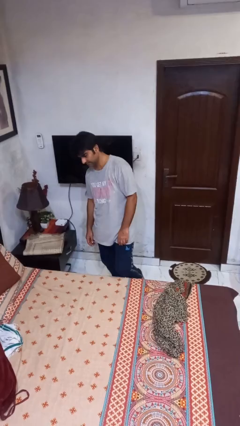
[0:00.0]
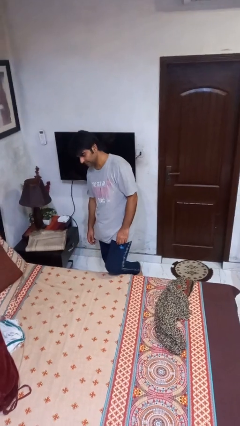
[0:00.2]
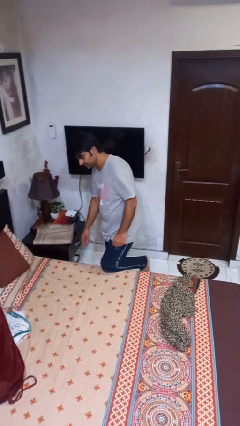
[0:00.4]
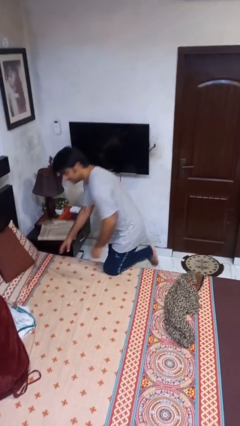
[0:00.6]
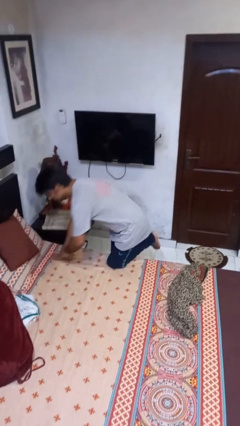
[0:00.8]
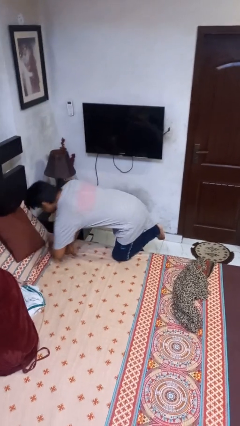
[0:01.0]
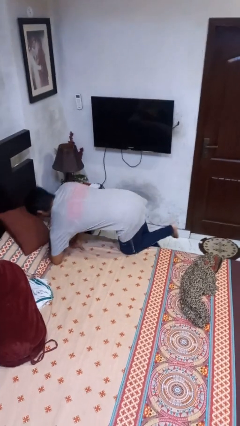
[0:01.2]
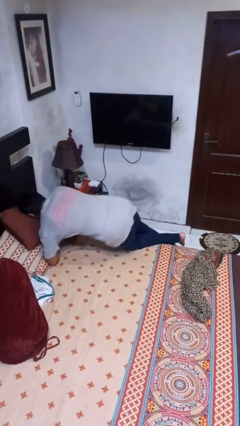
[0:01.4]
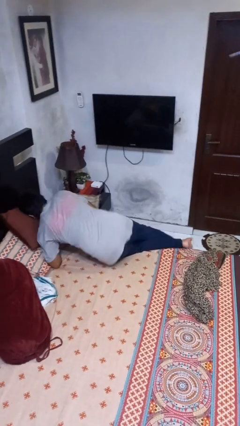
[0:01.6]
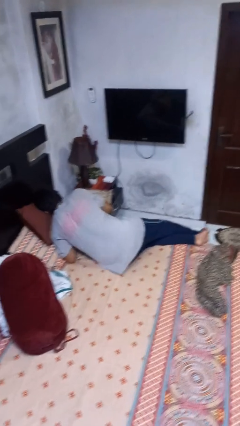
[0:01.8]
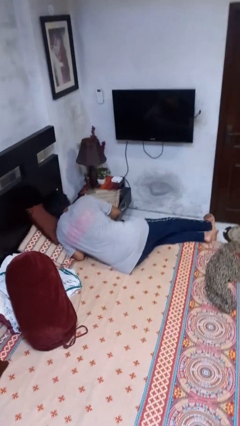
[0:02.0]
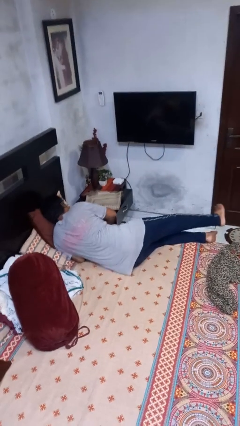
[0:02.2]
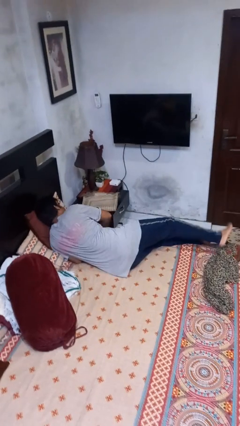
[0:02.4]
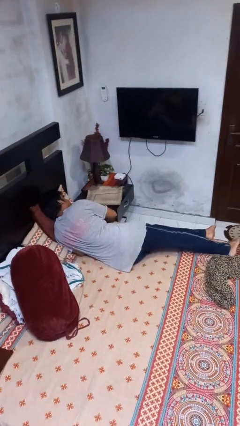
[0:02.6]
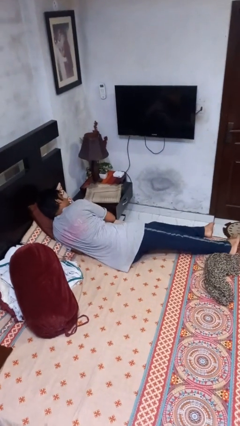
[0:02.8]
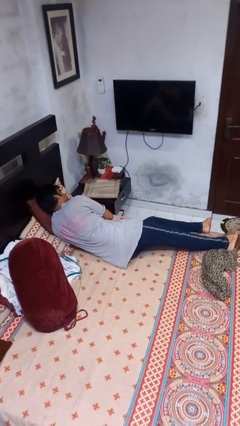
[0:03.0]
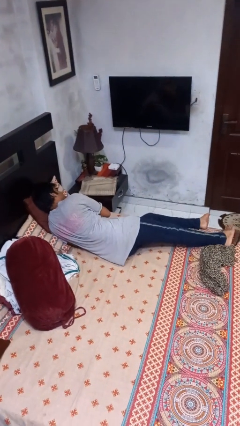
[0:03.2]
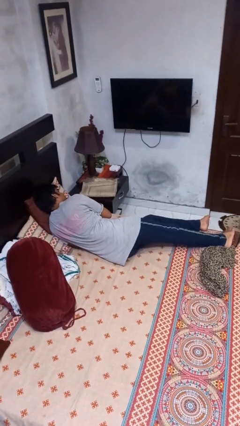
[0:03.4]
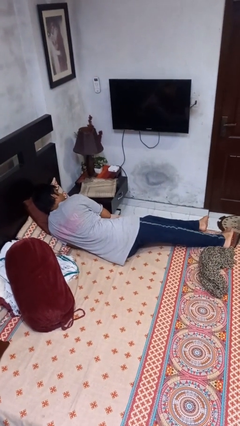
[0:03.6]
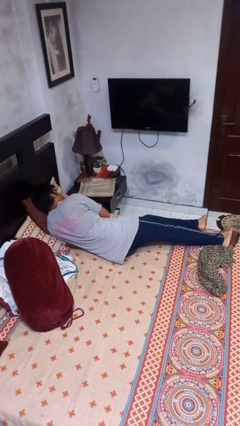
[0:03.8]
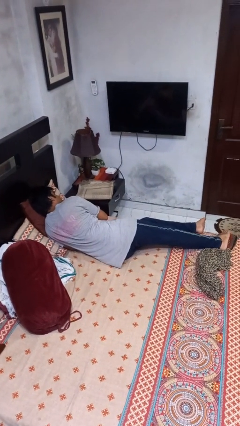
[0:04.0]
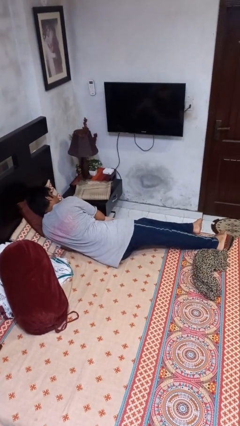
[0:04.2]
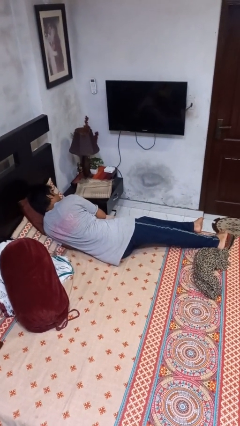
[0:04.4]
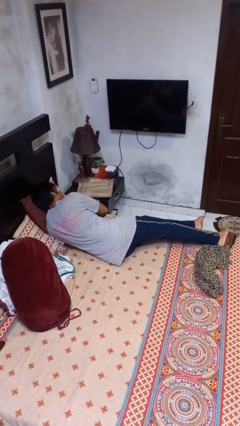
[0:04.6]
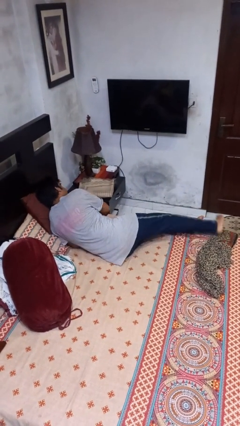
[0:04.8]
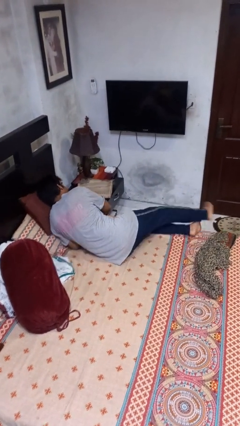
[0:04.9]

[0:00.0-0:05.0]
person lies down on bed

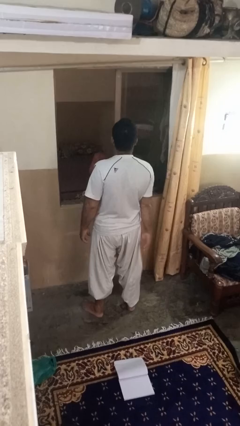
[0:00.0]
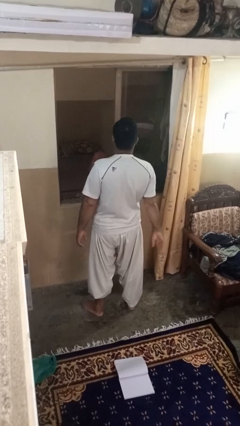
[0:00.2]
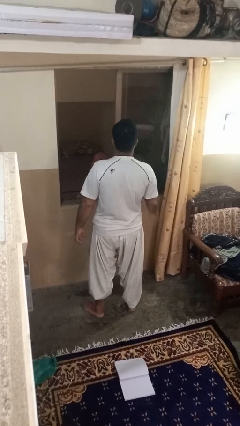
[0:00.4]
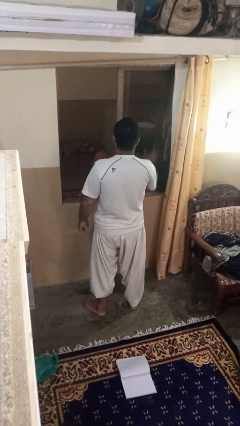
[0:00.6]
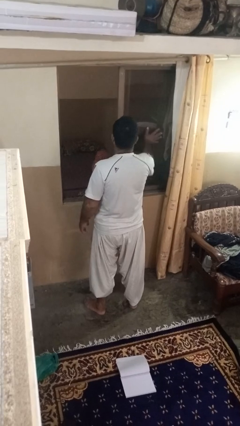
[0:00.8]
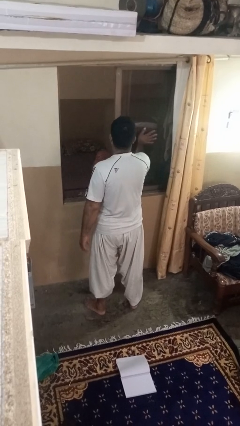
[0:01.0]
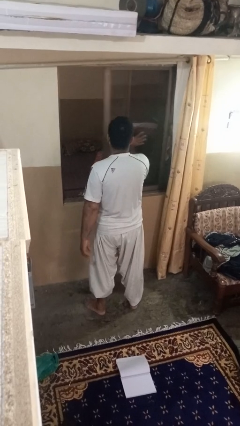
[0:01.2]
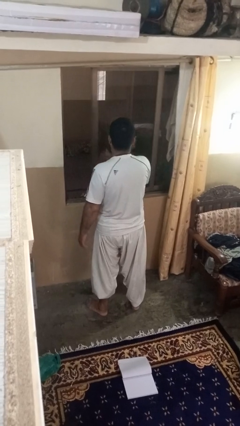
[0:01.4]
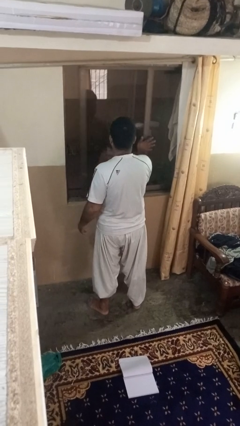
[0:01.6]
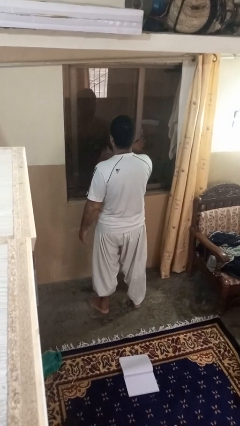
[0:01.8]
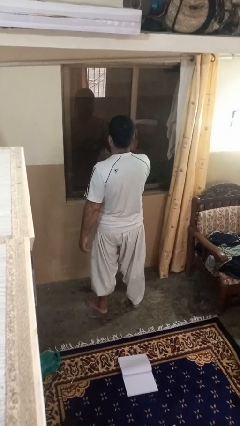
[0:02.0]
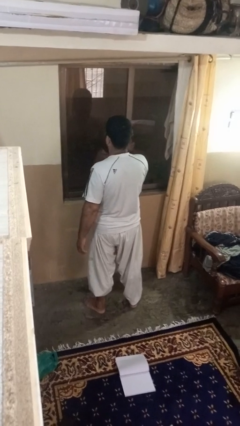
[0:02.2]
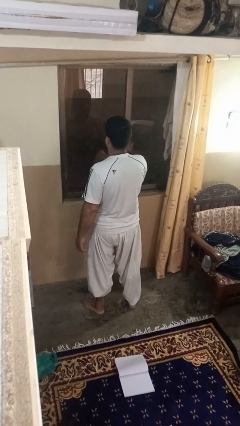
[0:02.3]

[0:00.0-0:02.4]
person closes home window

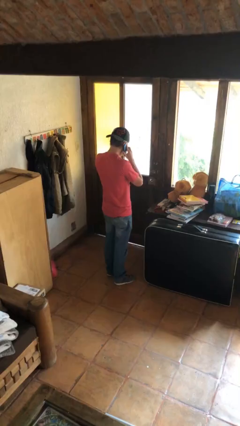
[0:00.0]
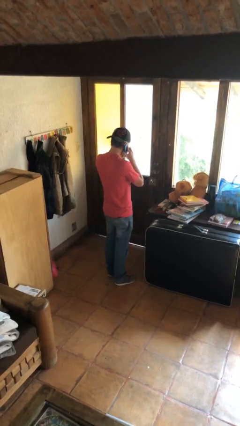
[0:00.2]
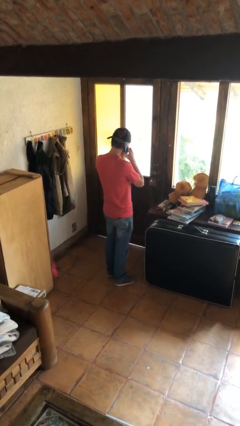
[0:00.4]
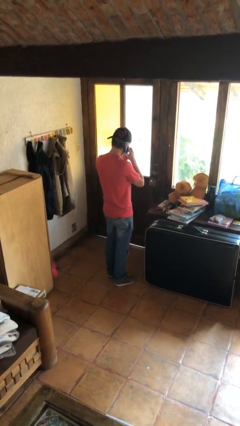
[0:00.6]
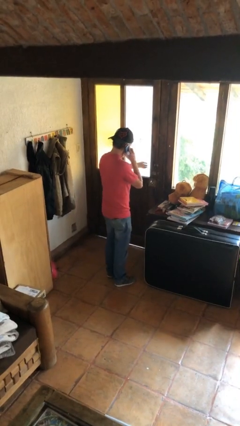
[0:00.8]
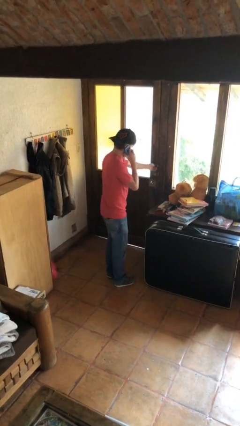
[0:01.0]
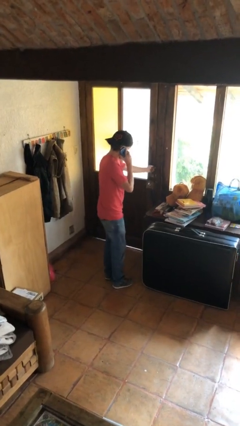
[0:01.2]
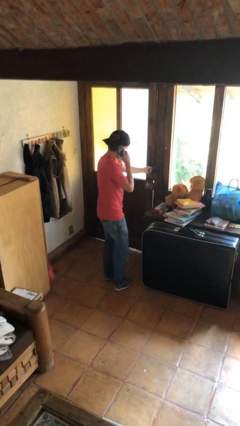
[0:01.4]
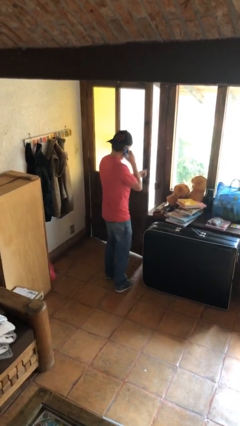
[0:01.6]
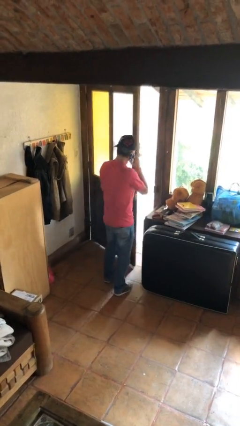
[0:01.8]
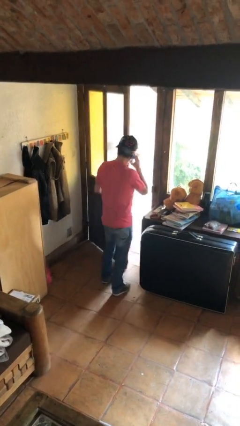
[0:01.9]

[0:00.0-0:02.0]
person opens facility door

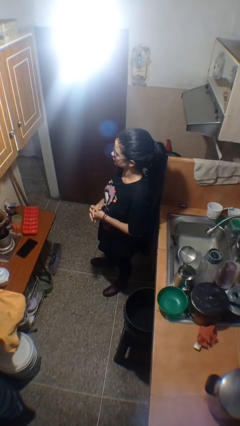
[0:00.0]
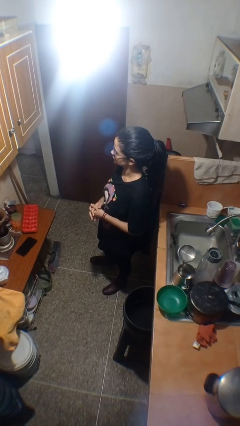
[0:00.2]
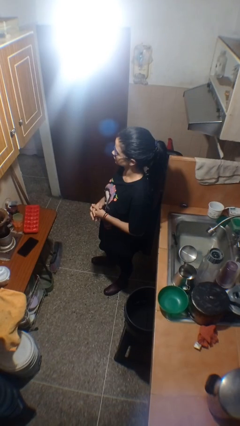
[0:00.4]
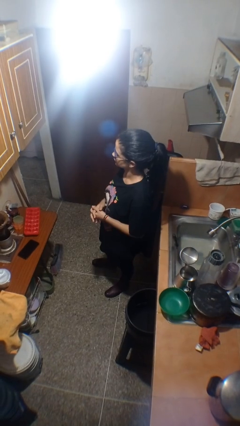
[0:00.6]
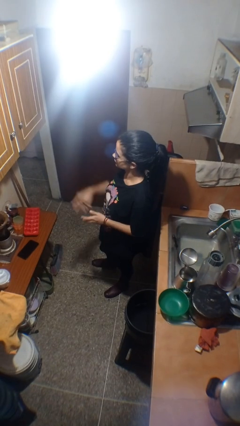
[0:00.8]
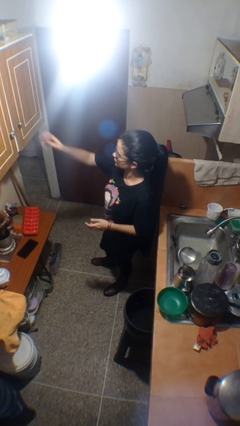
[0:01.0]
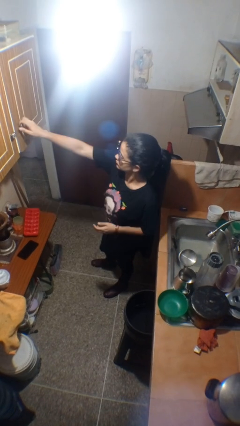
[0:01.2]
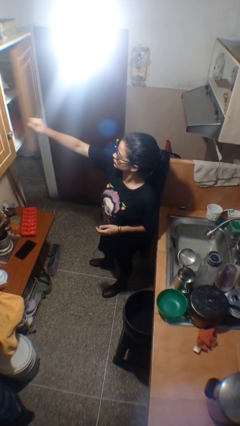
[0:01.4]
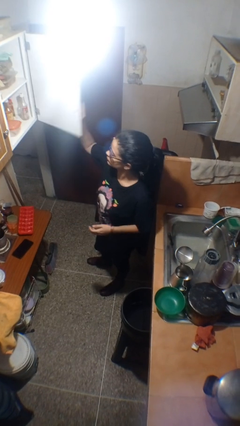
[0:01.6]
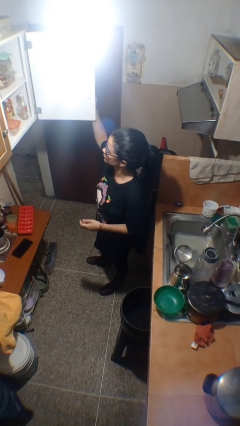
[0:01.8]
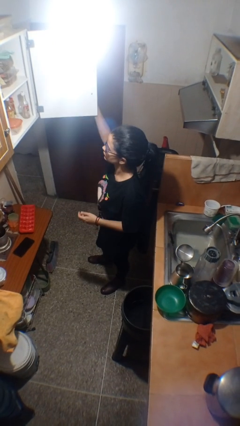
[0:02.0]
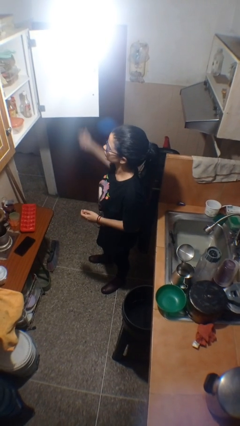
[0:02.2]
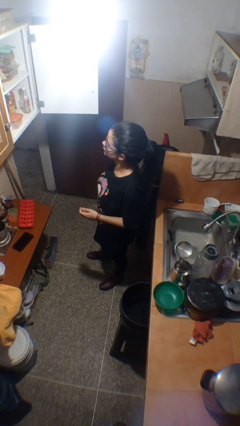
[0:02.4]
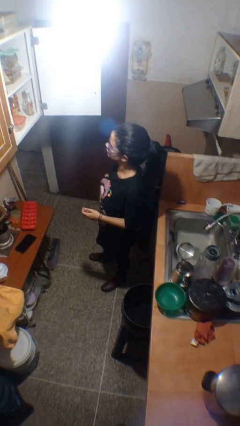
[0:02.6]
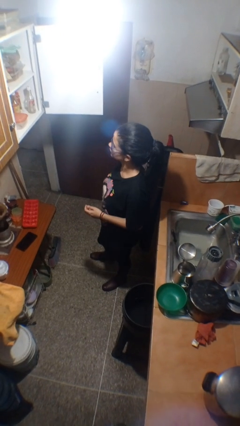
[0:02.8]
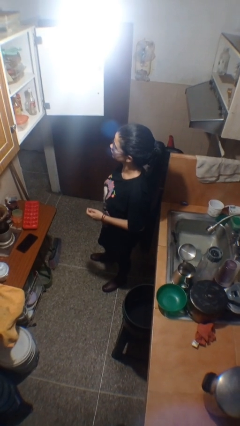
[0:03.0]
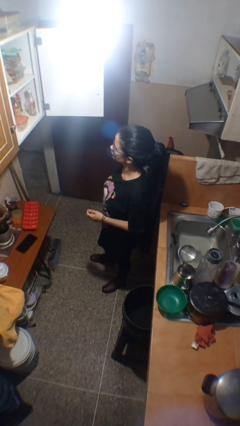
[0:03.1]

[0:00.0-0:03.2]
person opens cabinet

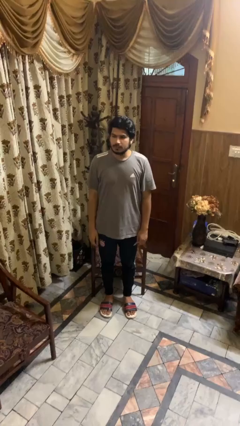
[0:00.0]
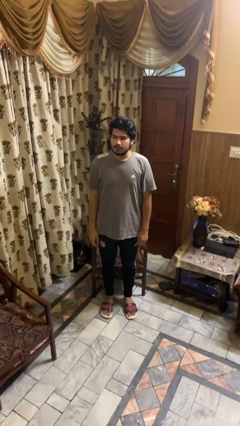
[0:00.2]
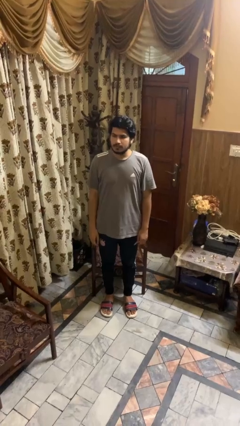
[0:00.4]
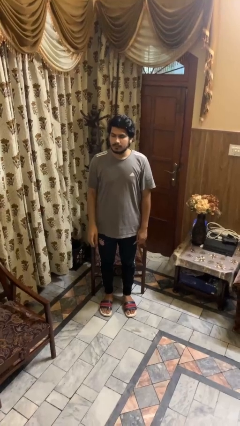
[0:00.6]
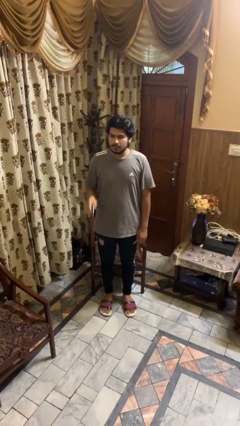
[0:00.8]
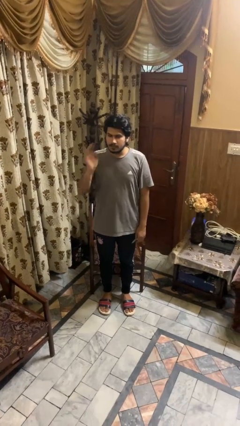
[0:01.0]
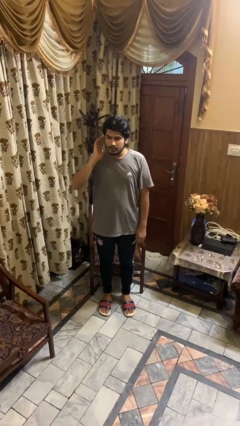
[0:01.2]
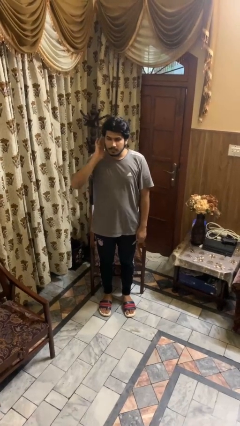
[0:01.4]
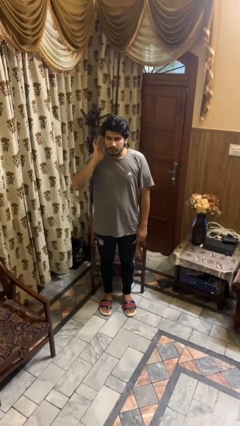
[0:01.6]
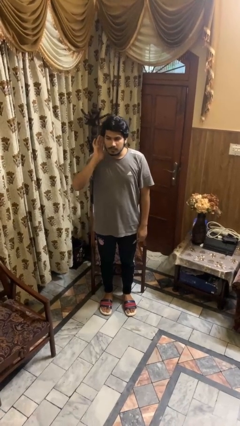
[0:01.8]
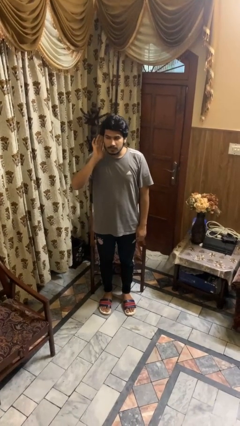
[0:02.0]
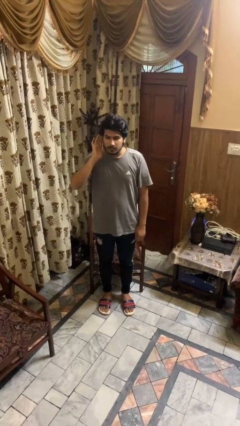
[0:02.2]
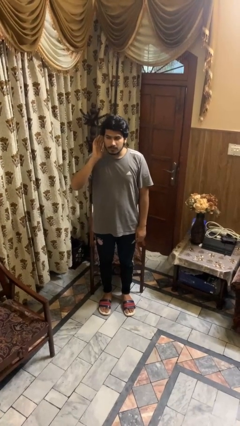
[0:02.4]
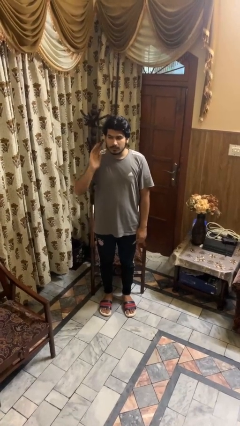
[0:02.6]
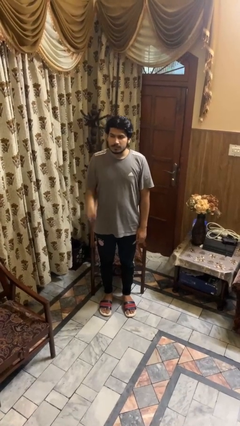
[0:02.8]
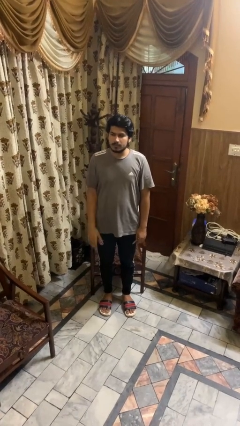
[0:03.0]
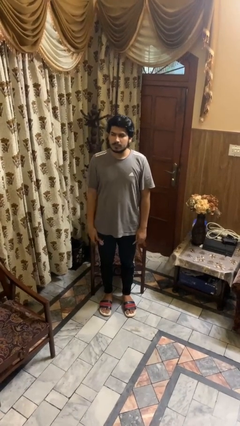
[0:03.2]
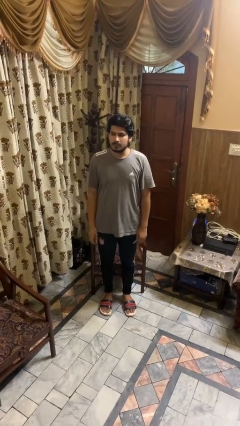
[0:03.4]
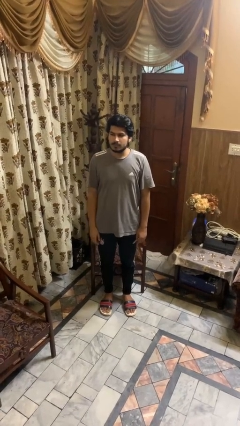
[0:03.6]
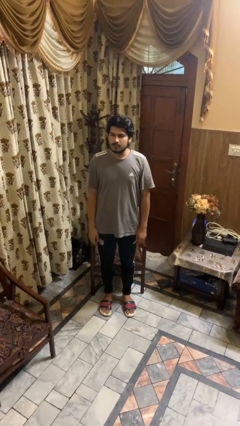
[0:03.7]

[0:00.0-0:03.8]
person gestures listen closely

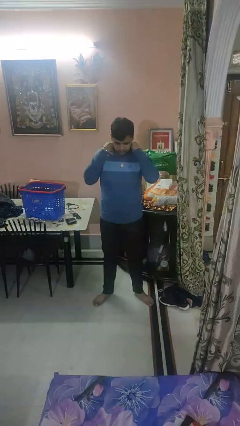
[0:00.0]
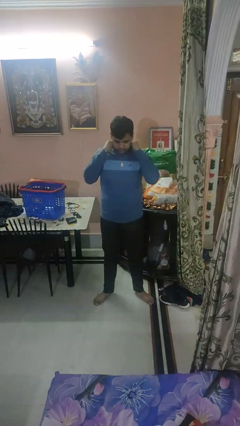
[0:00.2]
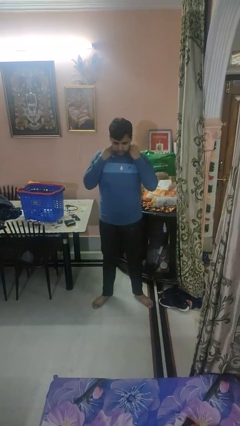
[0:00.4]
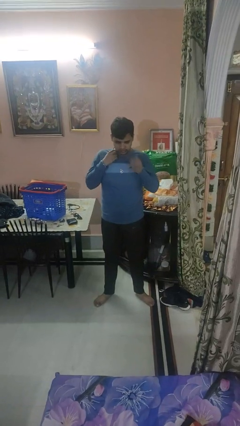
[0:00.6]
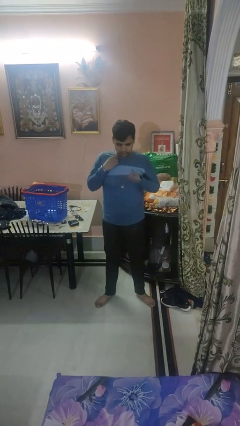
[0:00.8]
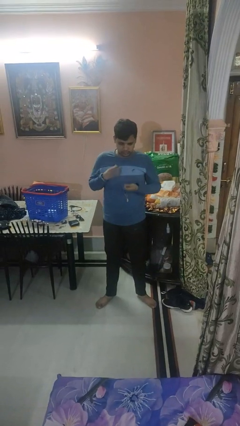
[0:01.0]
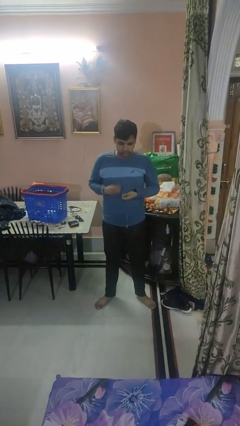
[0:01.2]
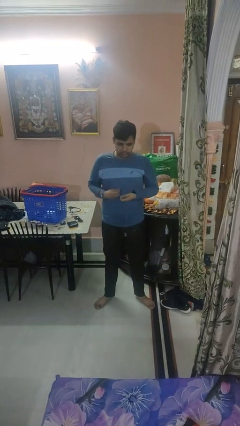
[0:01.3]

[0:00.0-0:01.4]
person takes off necklace
